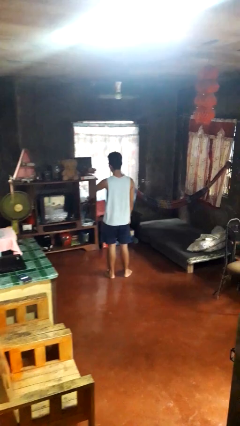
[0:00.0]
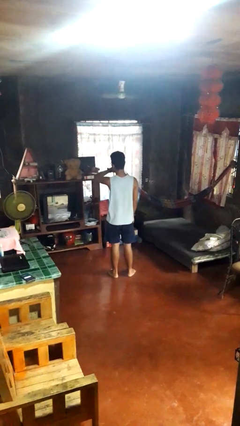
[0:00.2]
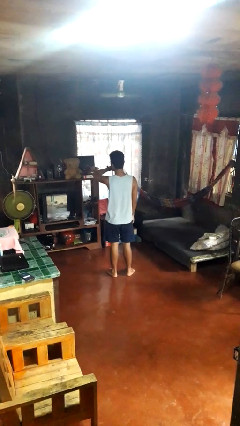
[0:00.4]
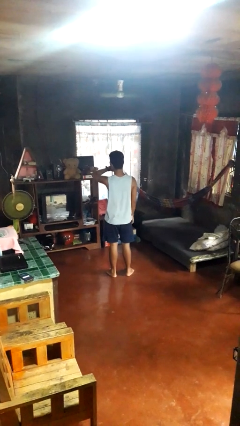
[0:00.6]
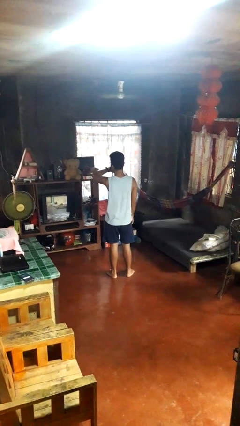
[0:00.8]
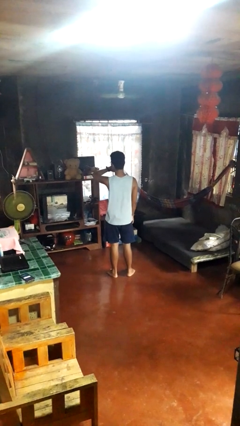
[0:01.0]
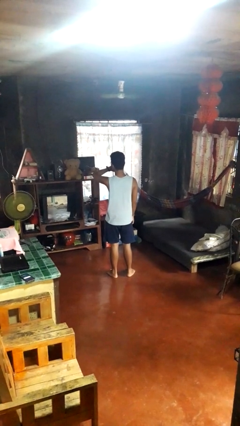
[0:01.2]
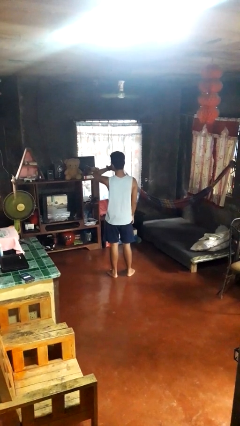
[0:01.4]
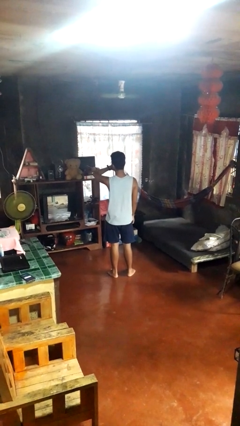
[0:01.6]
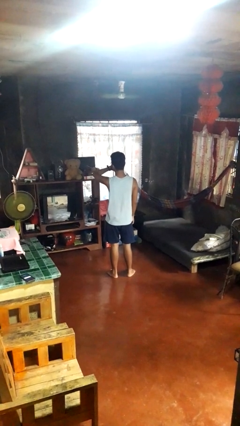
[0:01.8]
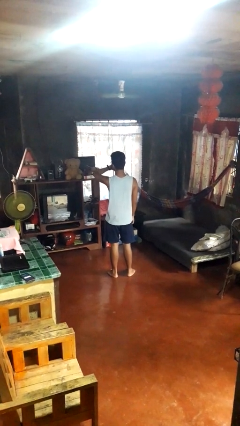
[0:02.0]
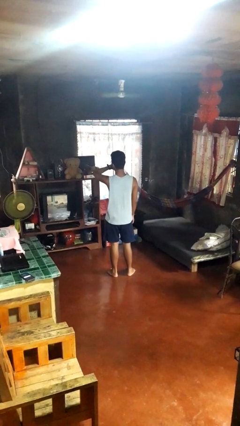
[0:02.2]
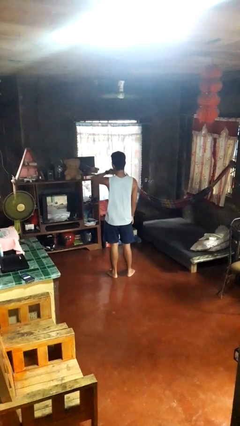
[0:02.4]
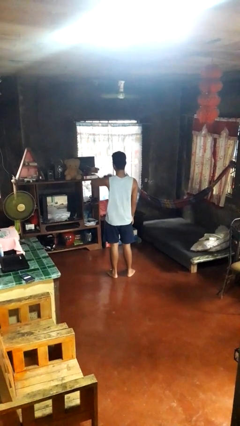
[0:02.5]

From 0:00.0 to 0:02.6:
person looks at wristwatch

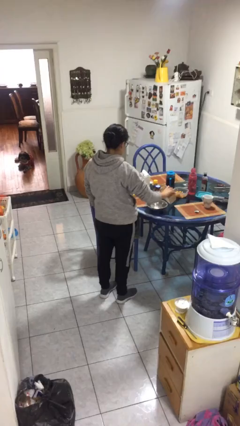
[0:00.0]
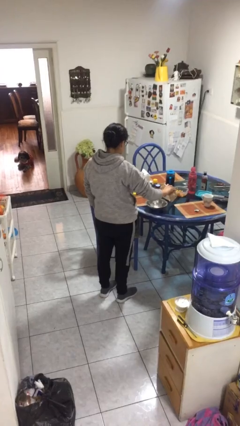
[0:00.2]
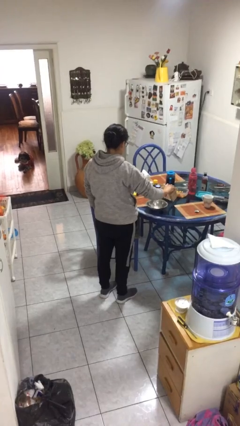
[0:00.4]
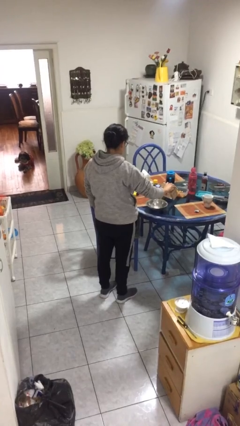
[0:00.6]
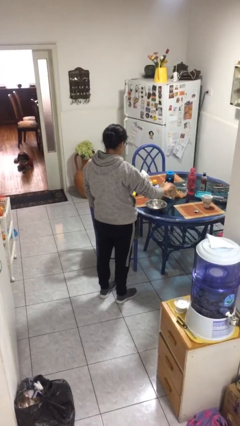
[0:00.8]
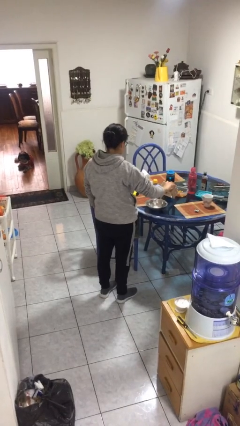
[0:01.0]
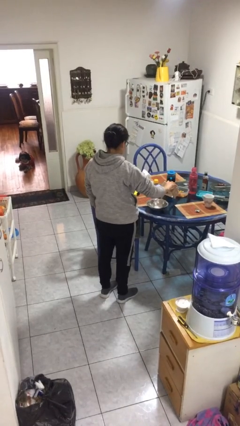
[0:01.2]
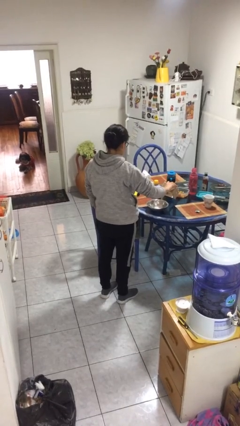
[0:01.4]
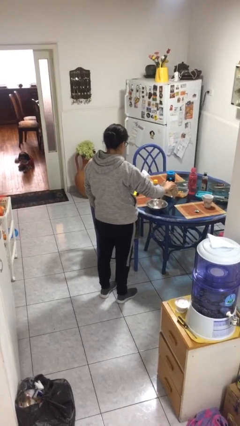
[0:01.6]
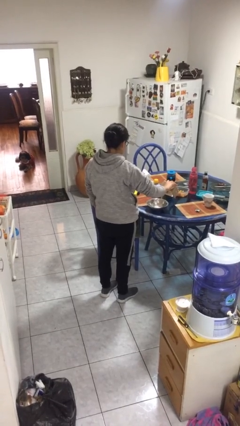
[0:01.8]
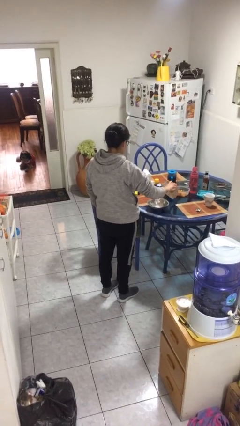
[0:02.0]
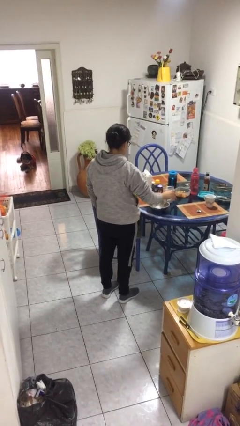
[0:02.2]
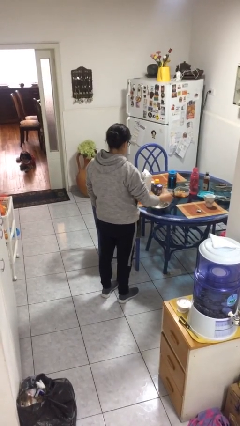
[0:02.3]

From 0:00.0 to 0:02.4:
person pours into bowl

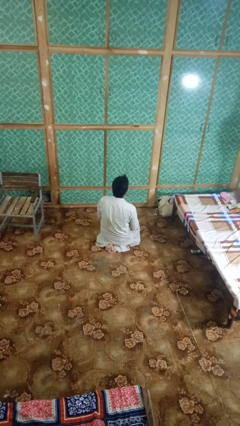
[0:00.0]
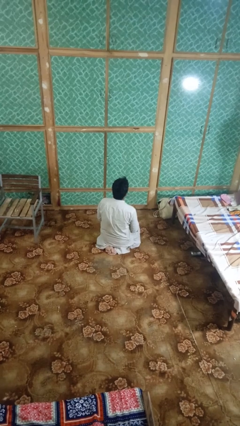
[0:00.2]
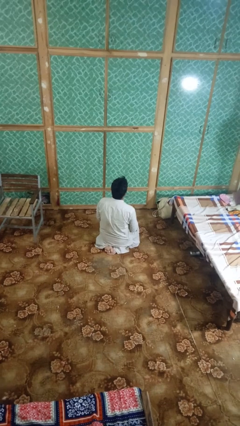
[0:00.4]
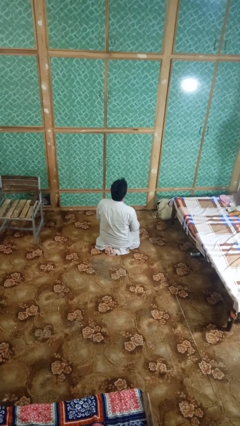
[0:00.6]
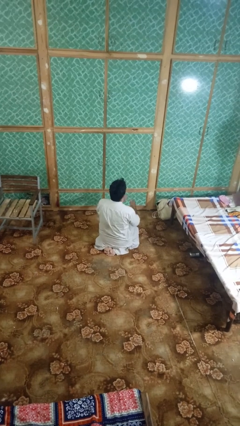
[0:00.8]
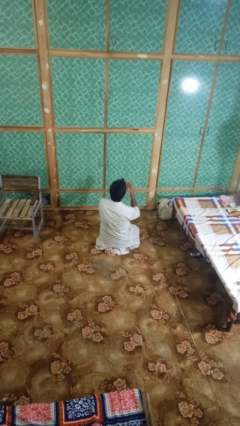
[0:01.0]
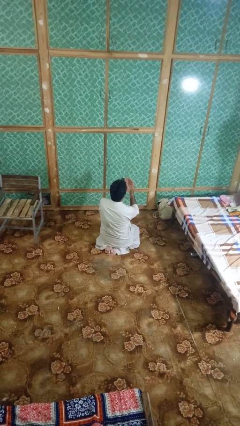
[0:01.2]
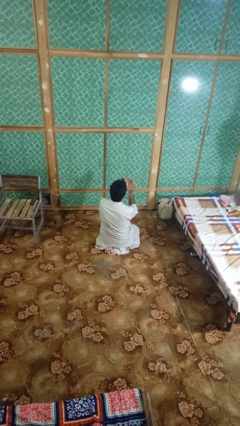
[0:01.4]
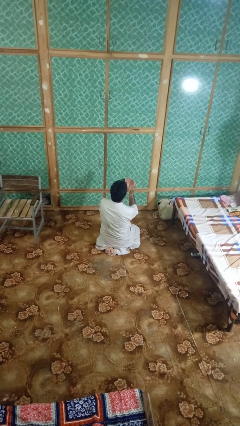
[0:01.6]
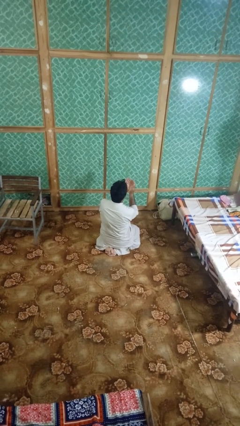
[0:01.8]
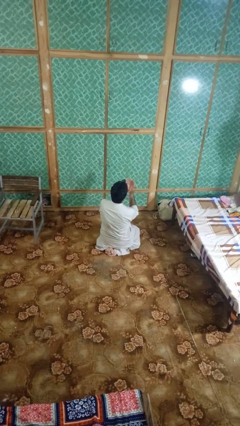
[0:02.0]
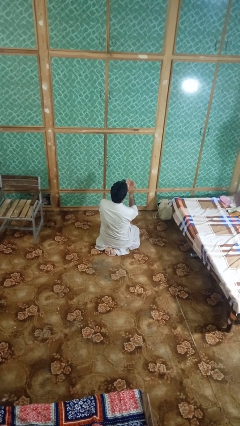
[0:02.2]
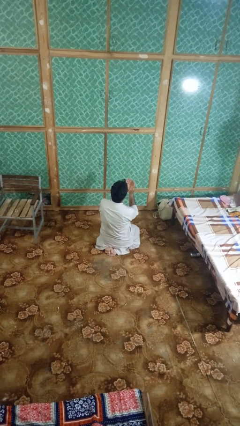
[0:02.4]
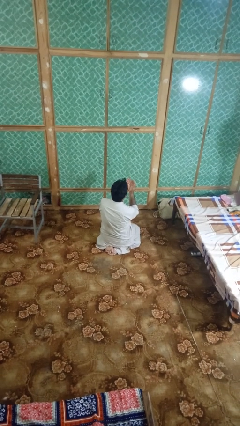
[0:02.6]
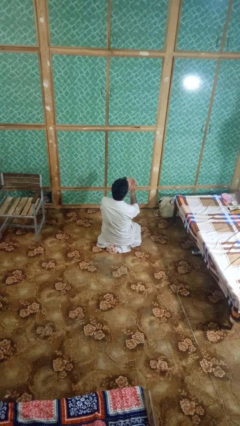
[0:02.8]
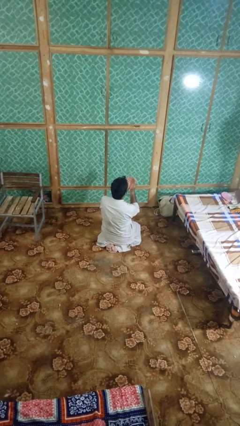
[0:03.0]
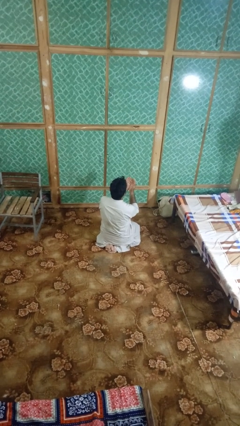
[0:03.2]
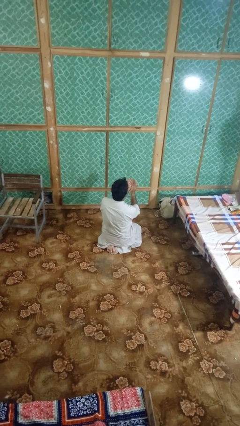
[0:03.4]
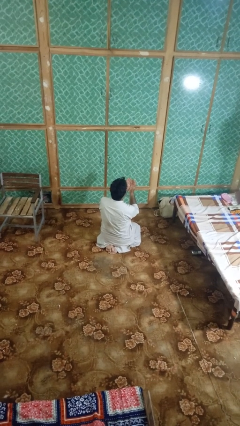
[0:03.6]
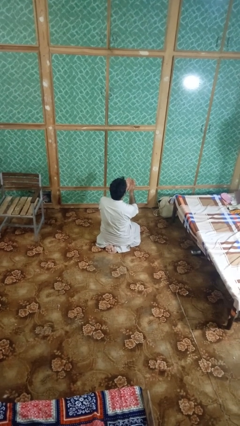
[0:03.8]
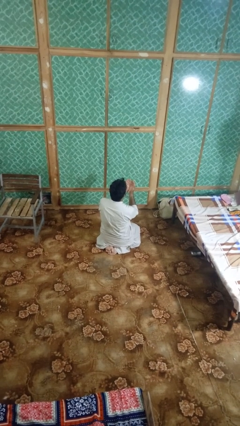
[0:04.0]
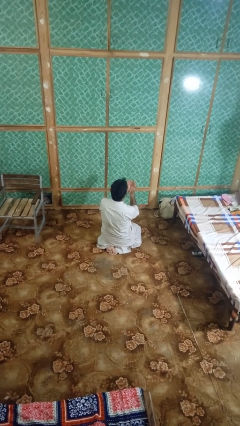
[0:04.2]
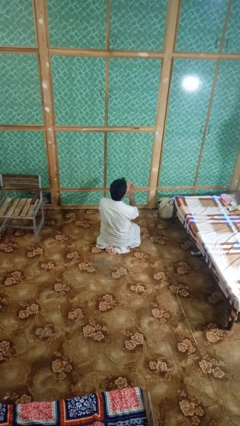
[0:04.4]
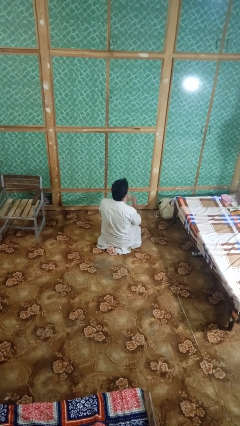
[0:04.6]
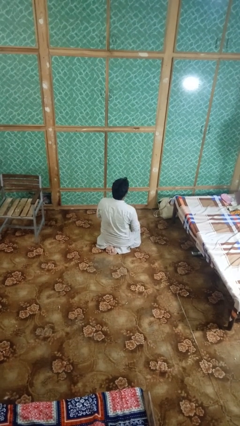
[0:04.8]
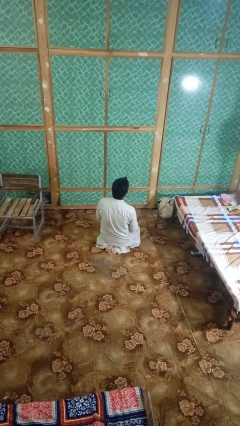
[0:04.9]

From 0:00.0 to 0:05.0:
person prays

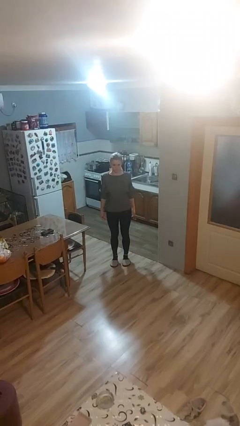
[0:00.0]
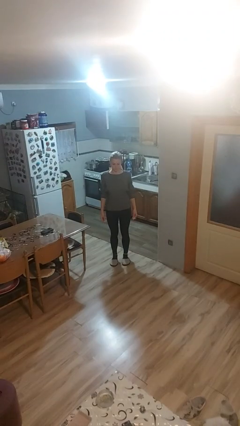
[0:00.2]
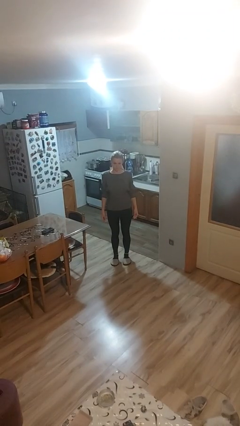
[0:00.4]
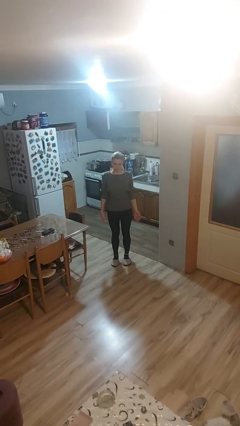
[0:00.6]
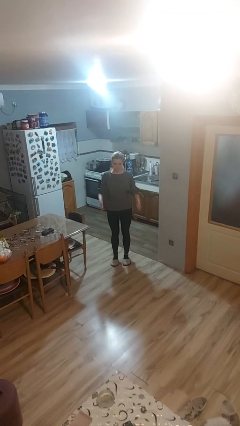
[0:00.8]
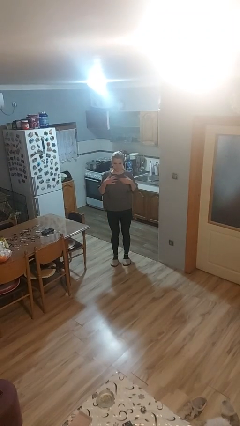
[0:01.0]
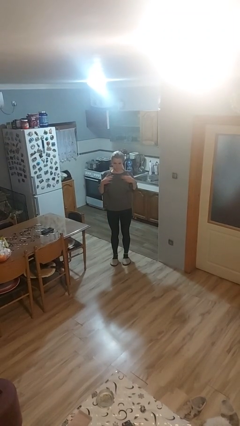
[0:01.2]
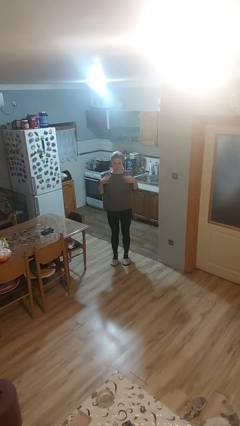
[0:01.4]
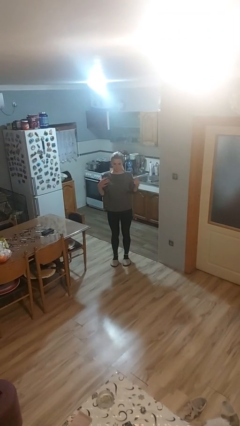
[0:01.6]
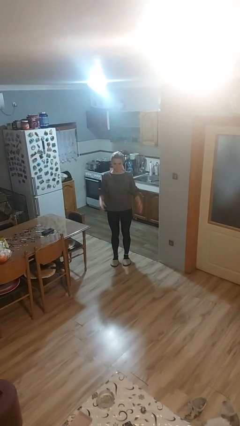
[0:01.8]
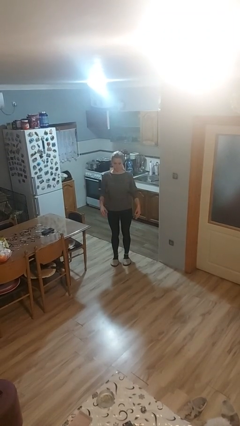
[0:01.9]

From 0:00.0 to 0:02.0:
person drums on chest

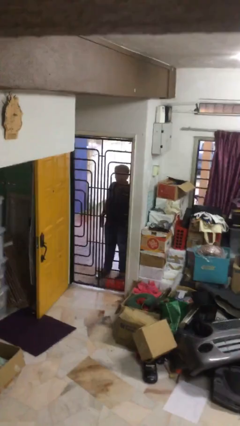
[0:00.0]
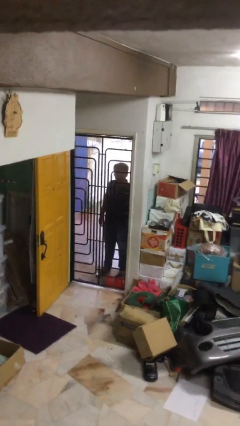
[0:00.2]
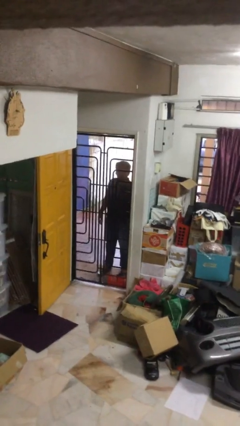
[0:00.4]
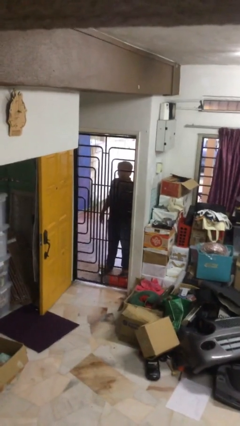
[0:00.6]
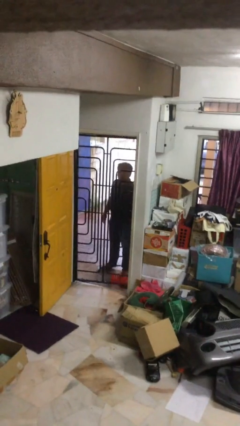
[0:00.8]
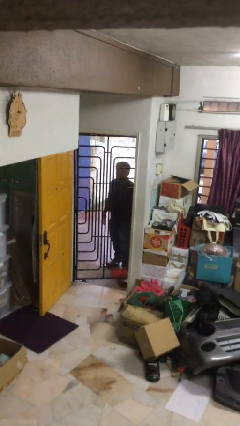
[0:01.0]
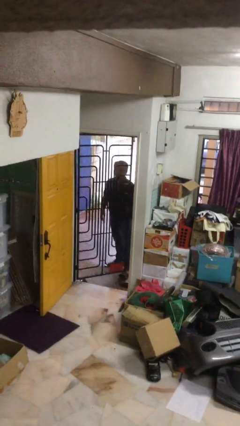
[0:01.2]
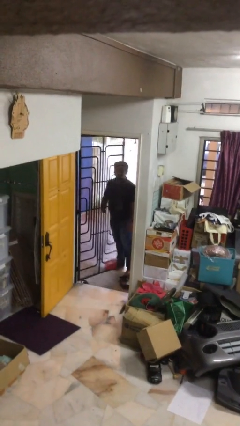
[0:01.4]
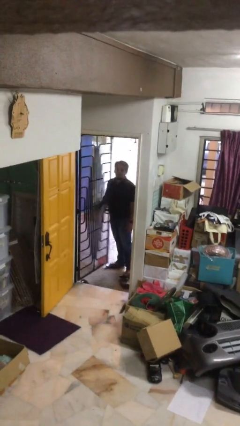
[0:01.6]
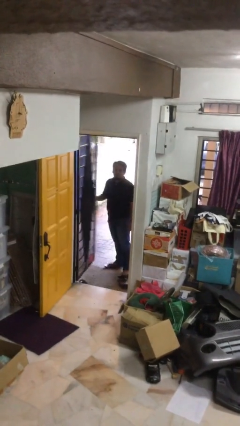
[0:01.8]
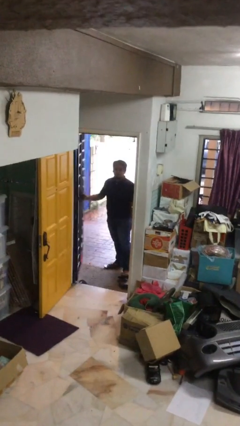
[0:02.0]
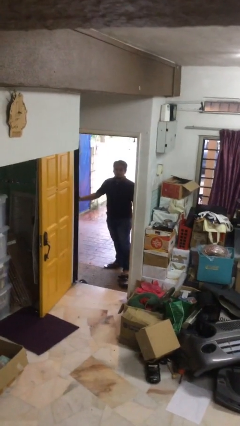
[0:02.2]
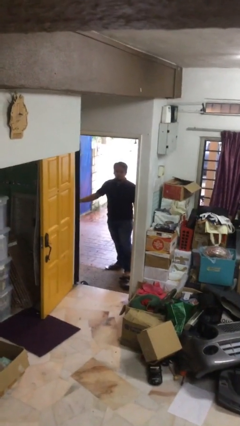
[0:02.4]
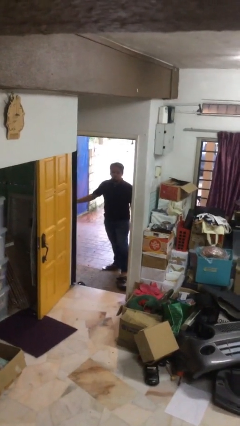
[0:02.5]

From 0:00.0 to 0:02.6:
person opens facility door

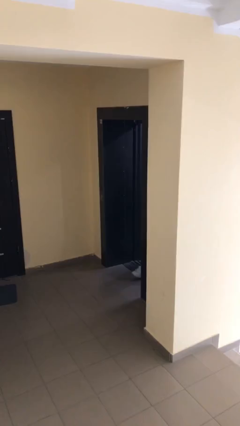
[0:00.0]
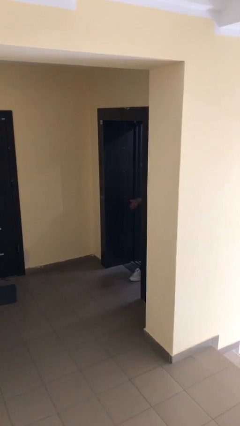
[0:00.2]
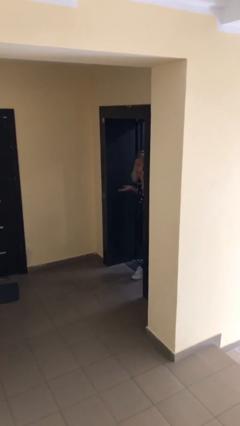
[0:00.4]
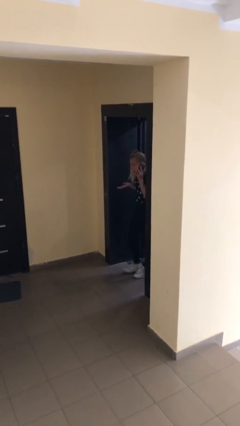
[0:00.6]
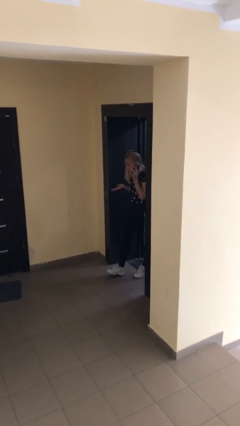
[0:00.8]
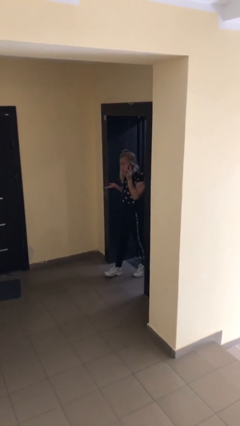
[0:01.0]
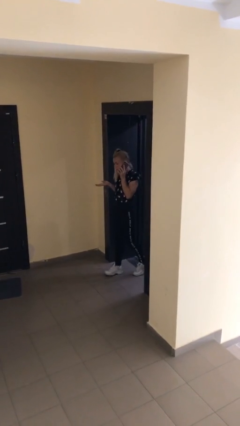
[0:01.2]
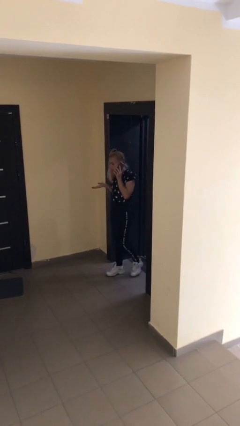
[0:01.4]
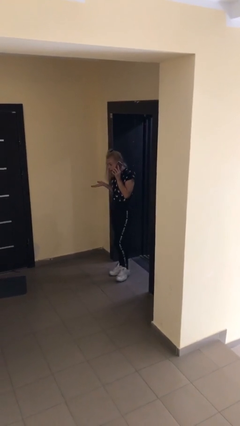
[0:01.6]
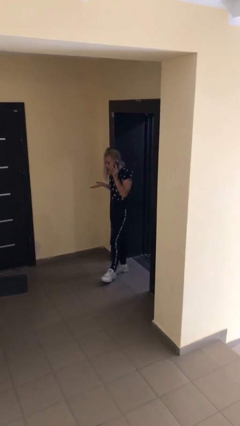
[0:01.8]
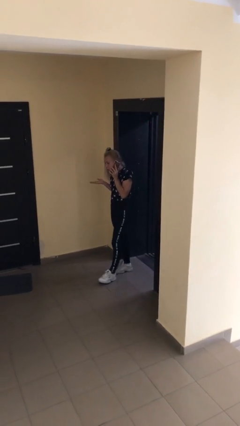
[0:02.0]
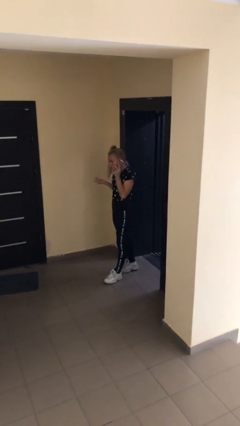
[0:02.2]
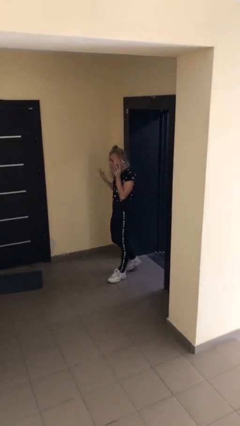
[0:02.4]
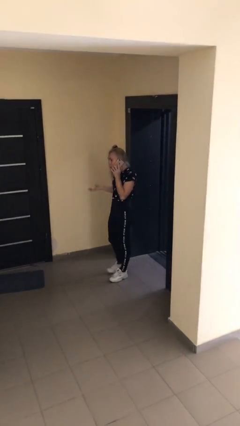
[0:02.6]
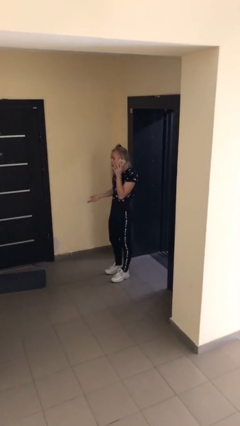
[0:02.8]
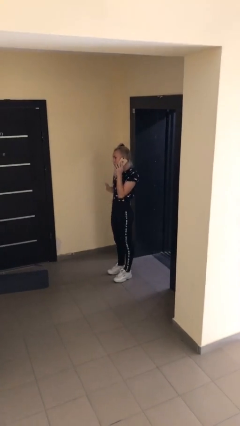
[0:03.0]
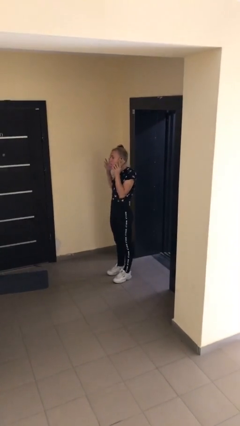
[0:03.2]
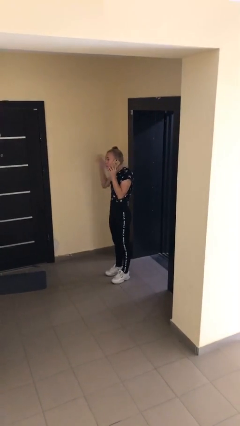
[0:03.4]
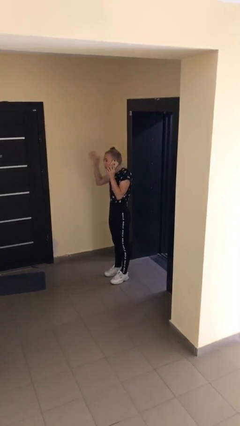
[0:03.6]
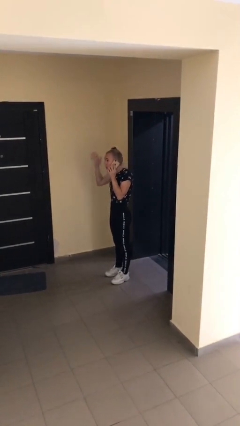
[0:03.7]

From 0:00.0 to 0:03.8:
person enters scene through structure
